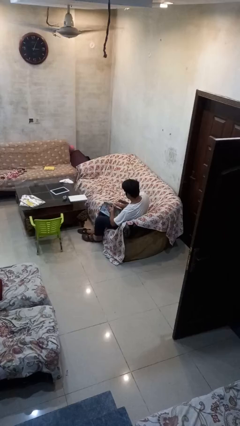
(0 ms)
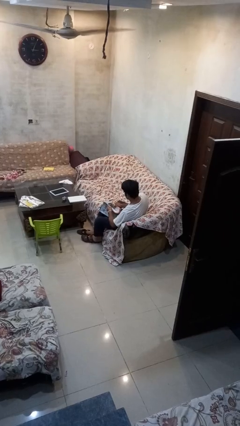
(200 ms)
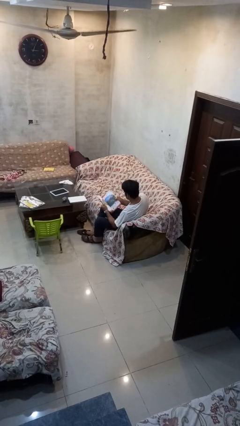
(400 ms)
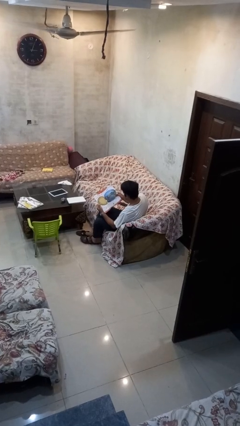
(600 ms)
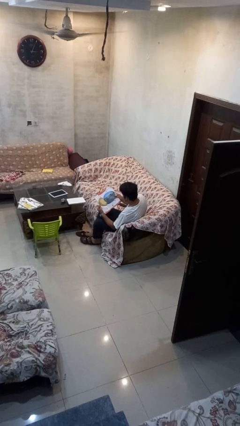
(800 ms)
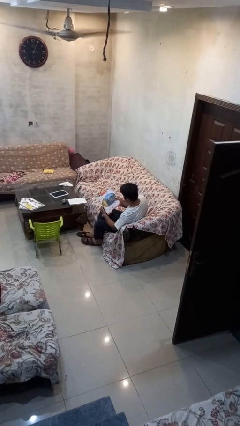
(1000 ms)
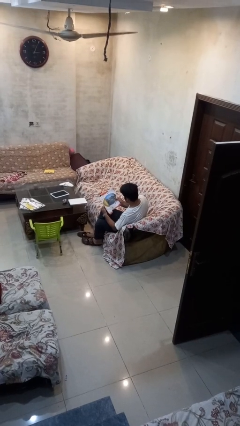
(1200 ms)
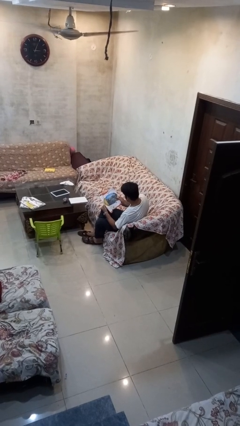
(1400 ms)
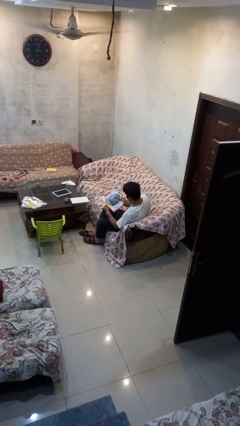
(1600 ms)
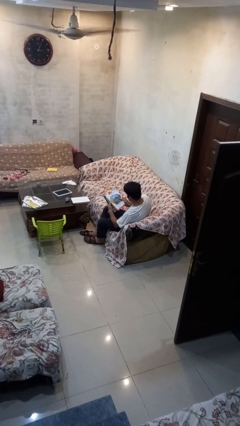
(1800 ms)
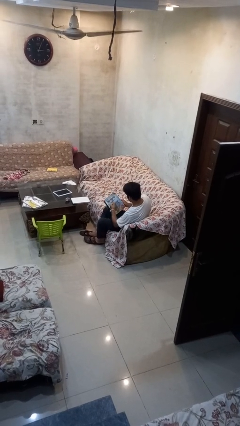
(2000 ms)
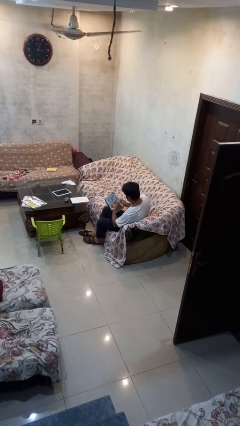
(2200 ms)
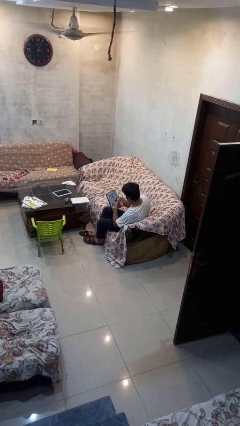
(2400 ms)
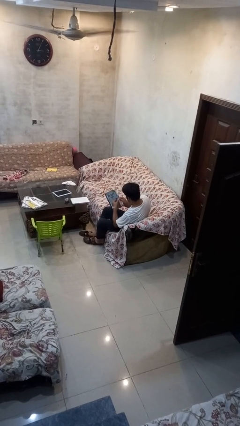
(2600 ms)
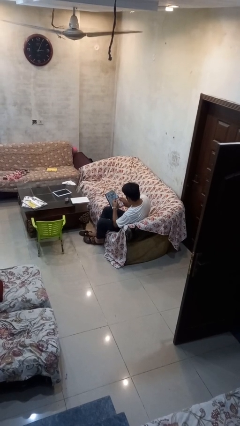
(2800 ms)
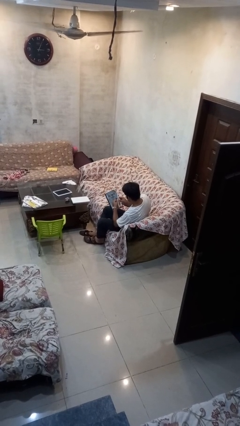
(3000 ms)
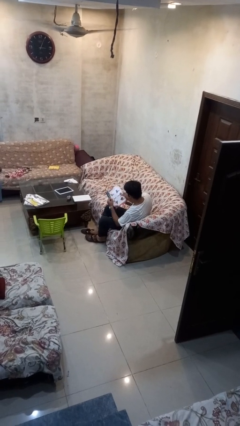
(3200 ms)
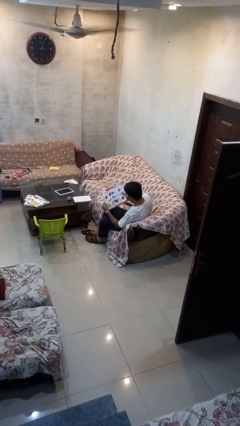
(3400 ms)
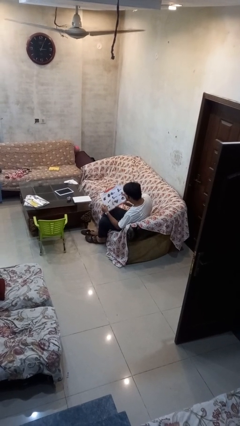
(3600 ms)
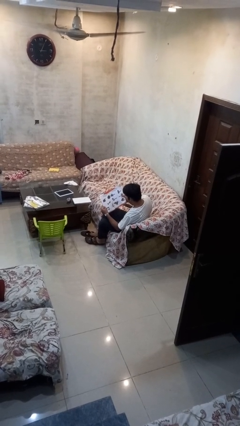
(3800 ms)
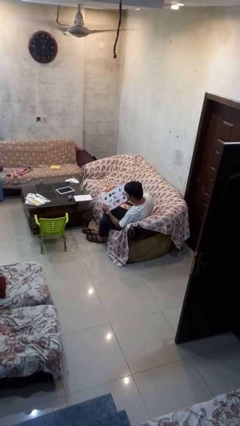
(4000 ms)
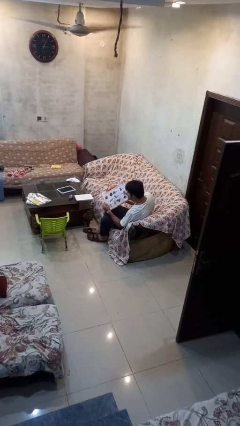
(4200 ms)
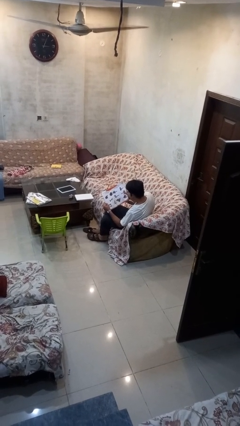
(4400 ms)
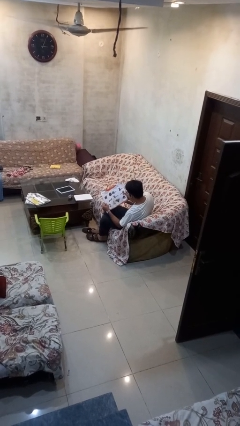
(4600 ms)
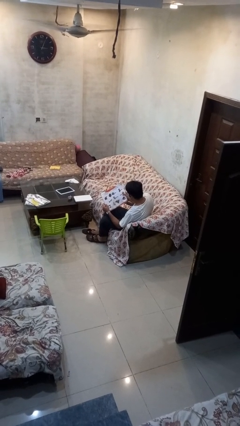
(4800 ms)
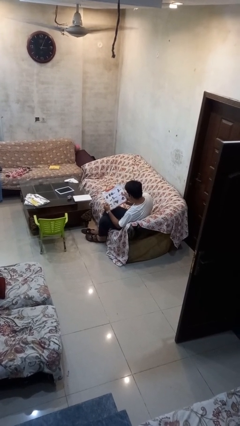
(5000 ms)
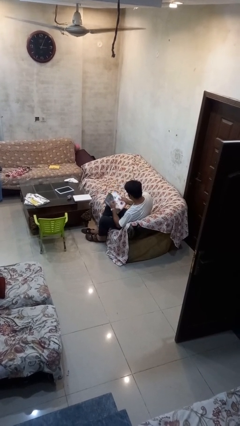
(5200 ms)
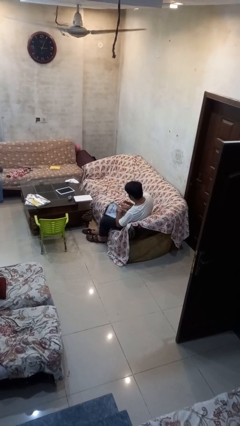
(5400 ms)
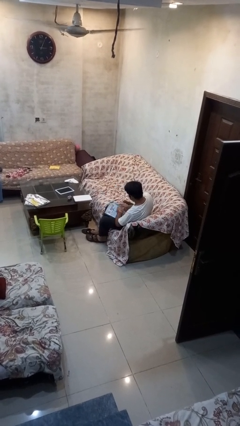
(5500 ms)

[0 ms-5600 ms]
person reads book

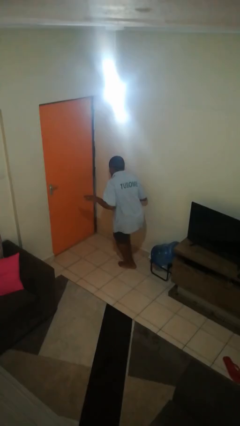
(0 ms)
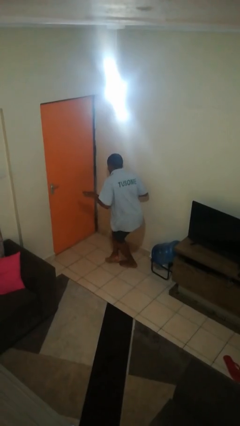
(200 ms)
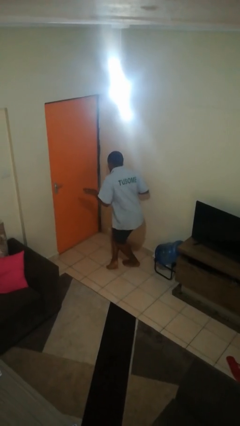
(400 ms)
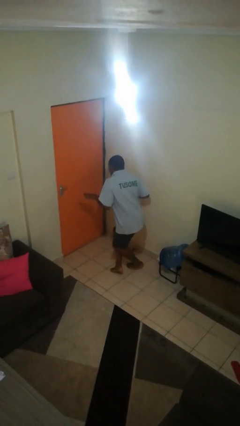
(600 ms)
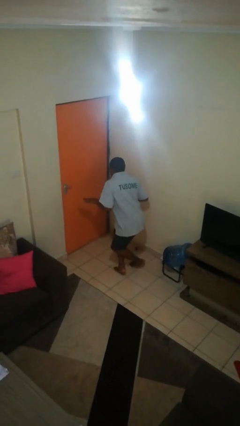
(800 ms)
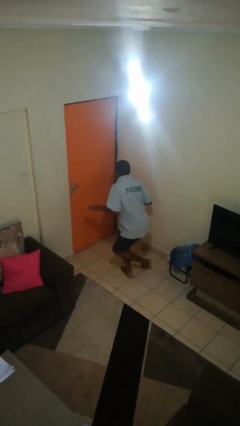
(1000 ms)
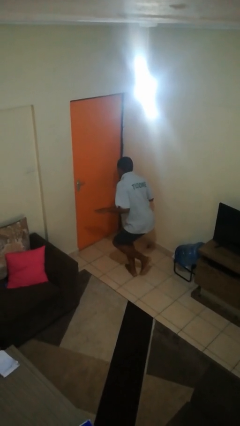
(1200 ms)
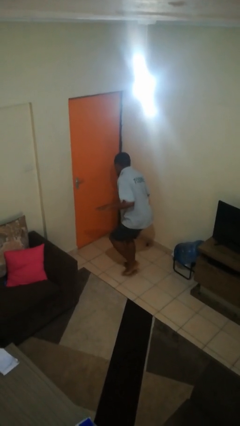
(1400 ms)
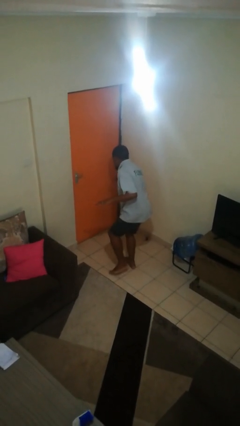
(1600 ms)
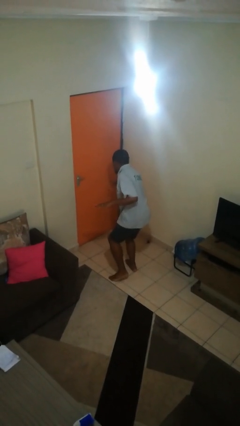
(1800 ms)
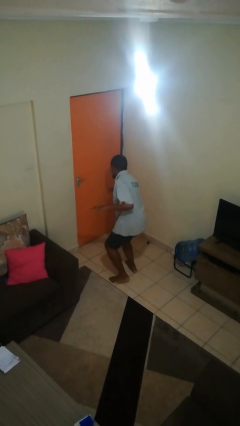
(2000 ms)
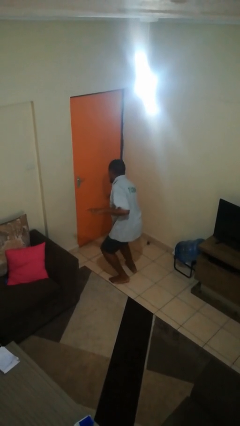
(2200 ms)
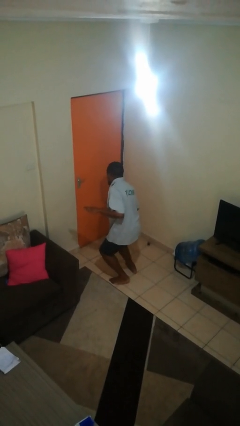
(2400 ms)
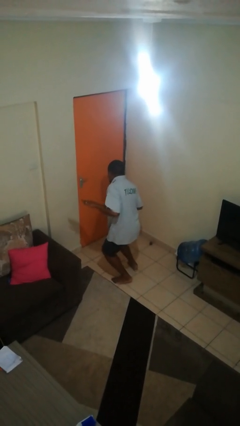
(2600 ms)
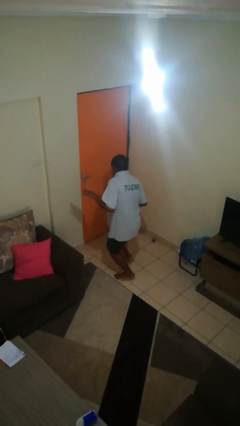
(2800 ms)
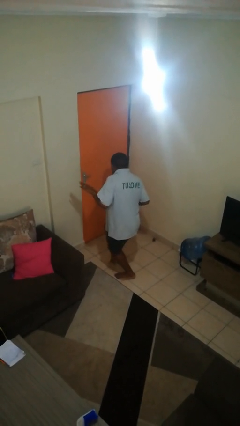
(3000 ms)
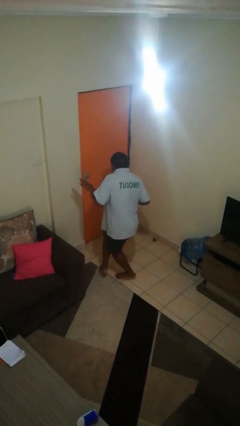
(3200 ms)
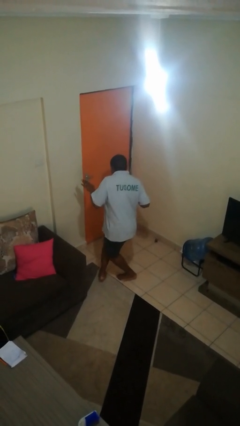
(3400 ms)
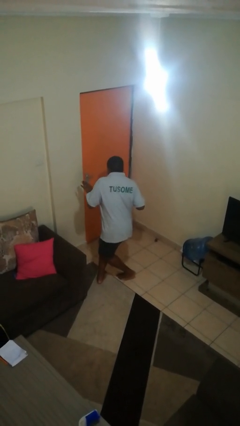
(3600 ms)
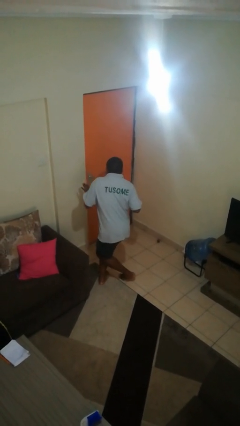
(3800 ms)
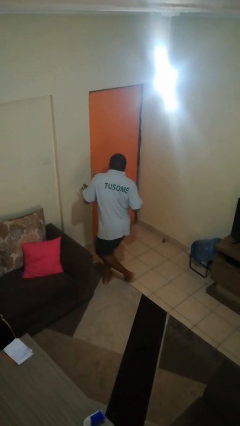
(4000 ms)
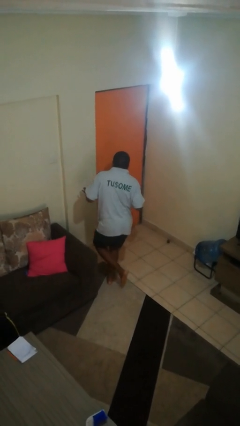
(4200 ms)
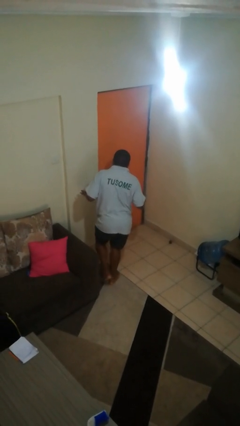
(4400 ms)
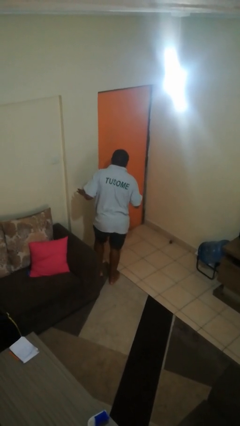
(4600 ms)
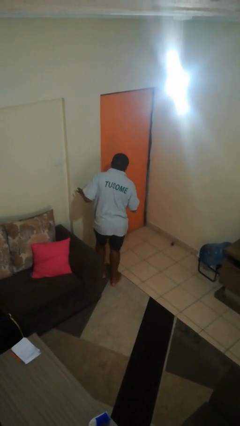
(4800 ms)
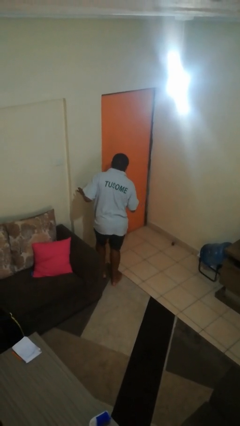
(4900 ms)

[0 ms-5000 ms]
person walks tiptoe

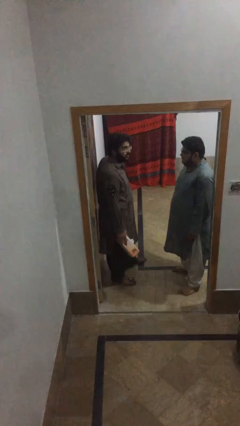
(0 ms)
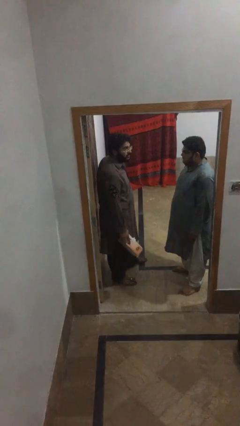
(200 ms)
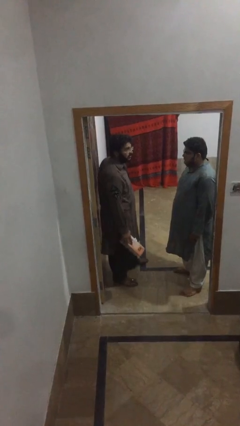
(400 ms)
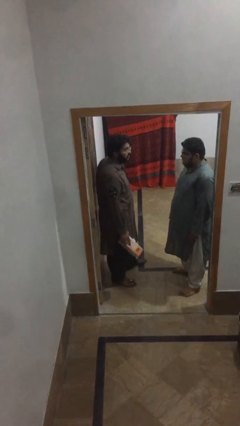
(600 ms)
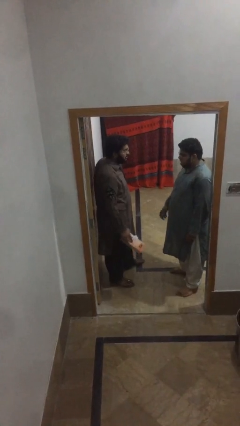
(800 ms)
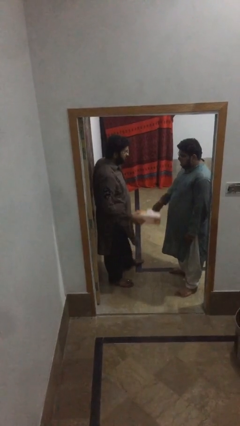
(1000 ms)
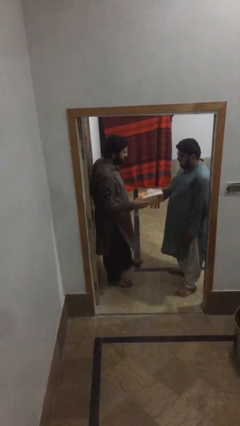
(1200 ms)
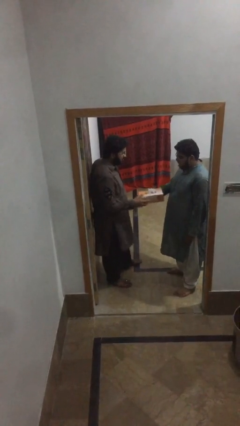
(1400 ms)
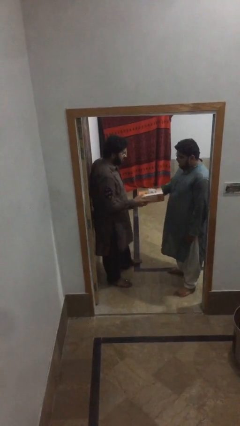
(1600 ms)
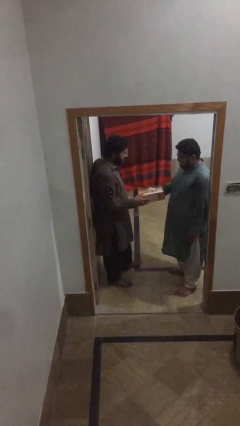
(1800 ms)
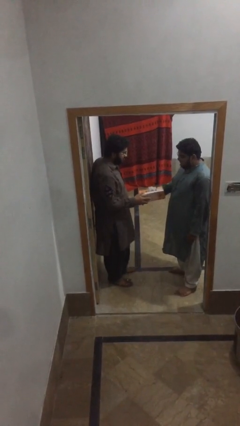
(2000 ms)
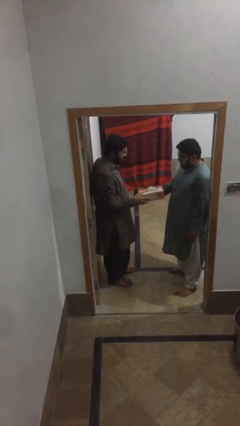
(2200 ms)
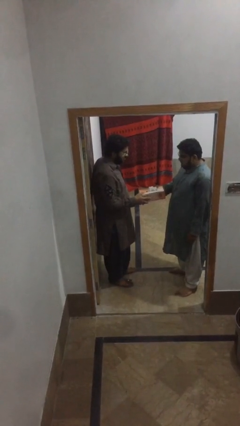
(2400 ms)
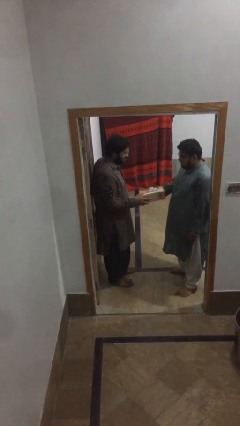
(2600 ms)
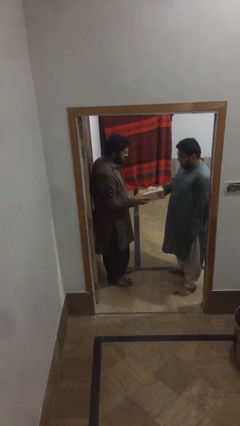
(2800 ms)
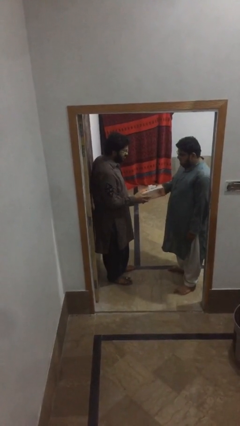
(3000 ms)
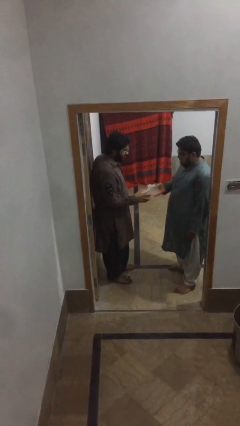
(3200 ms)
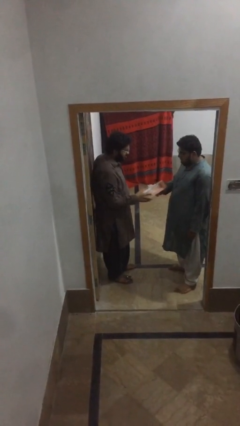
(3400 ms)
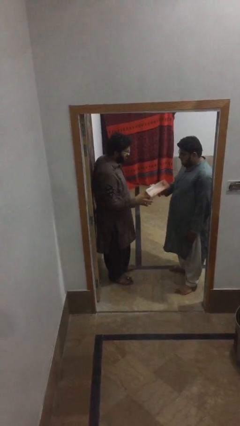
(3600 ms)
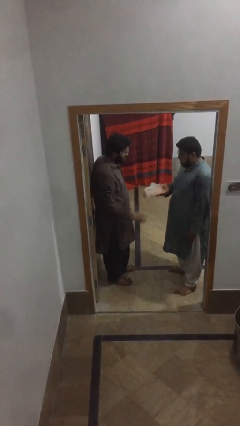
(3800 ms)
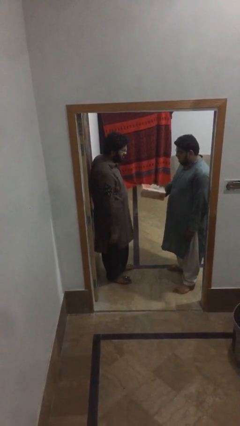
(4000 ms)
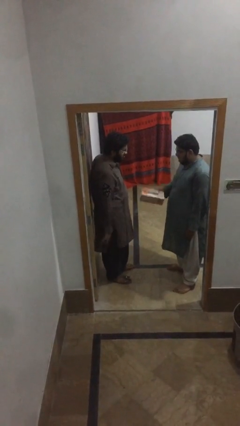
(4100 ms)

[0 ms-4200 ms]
person transfers object to person

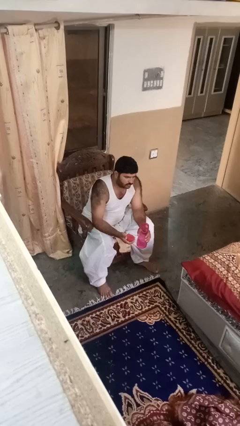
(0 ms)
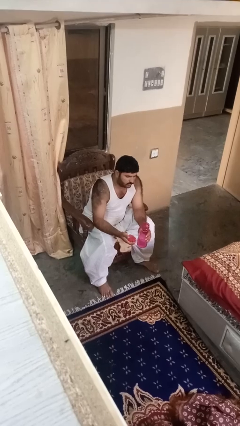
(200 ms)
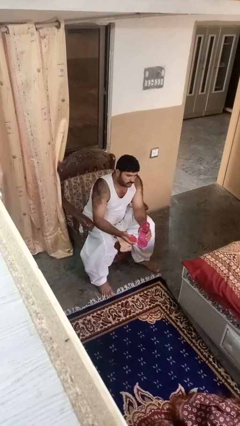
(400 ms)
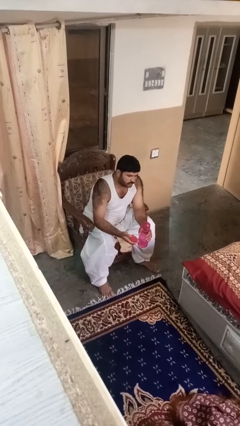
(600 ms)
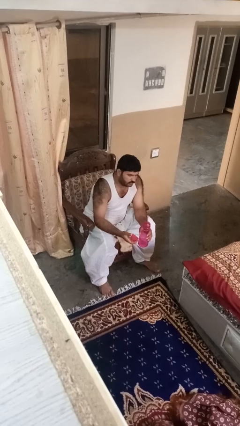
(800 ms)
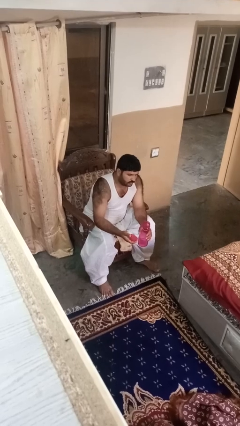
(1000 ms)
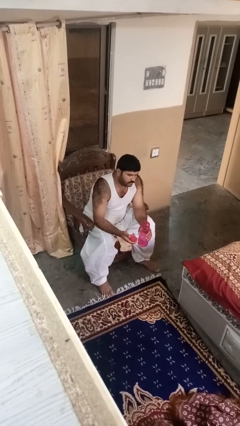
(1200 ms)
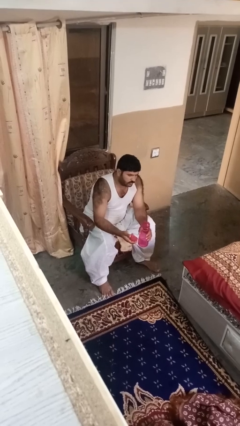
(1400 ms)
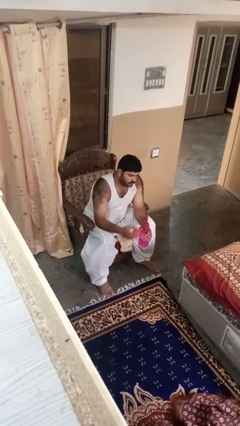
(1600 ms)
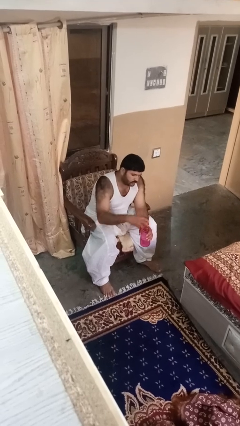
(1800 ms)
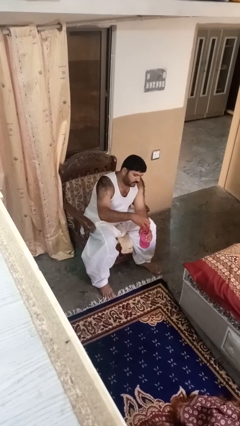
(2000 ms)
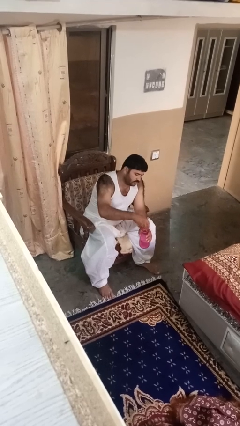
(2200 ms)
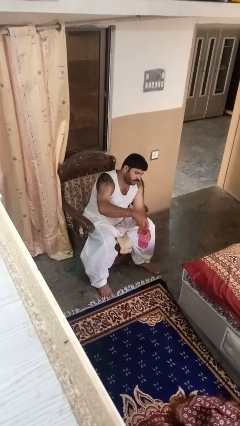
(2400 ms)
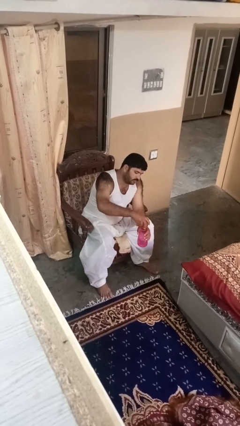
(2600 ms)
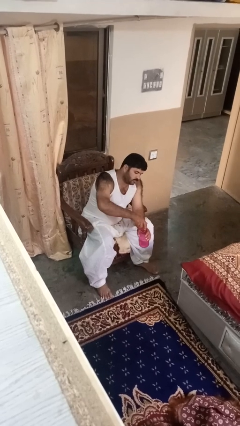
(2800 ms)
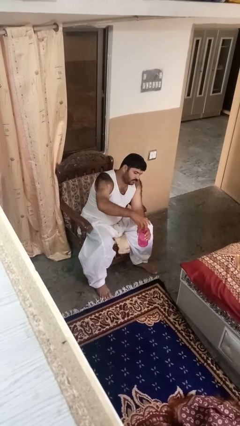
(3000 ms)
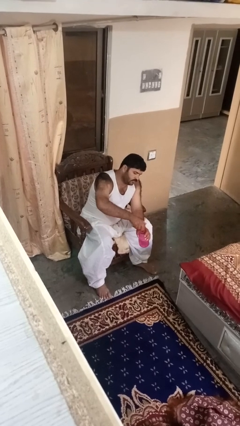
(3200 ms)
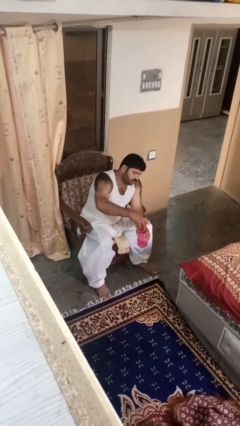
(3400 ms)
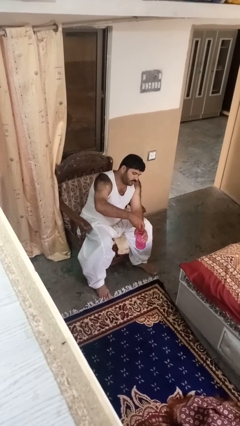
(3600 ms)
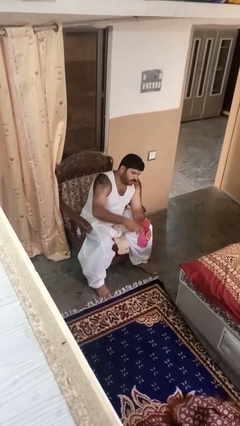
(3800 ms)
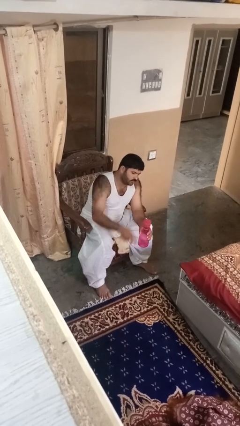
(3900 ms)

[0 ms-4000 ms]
person screws lid to bottle
